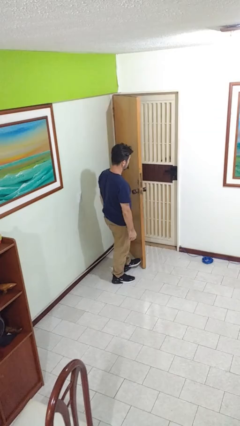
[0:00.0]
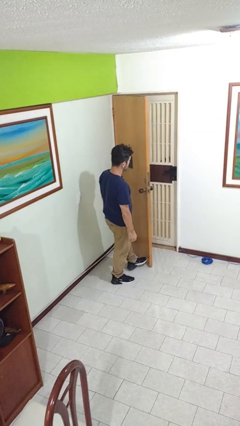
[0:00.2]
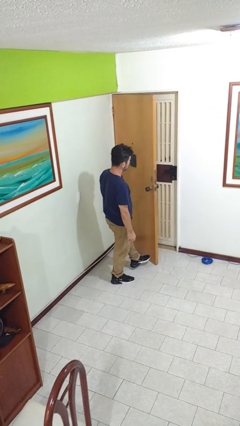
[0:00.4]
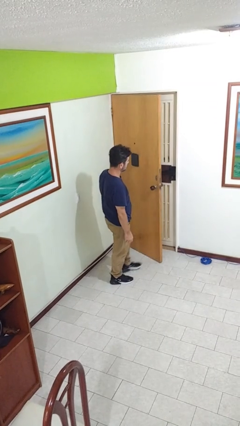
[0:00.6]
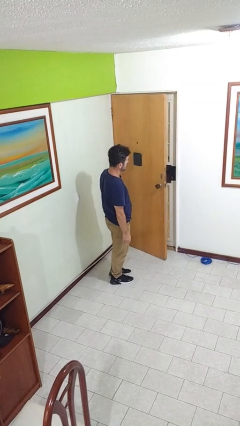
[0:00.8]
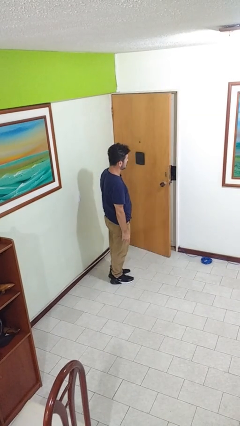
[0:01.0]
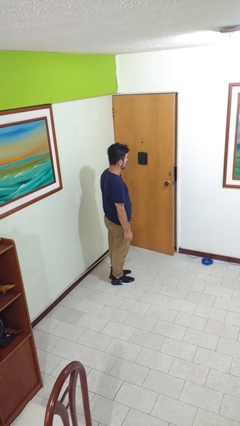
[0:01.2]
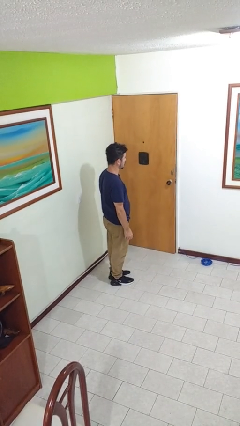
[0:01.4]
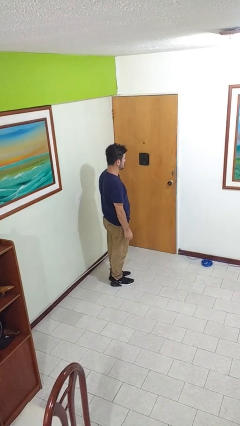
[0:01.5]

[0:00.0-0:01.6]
person closes door with foot

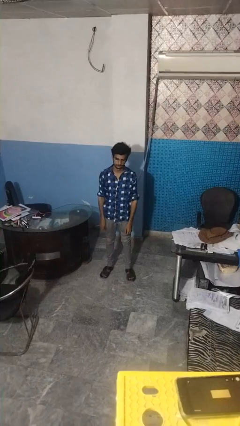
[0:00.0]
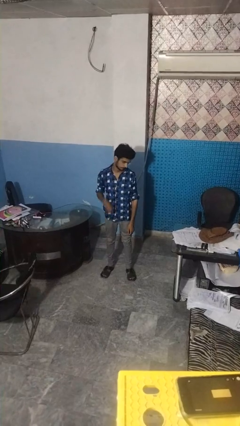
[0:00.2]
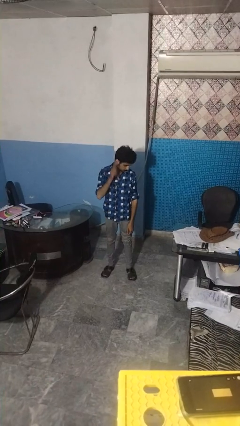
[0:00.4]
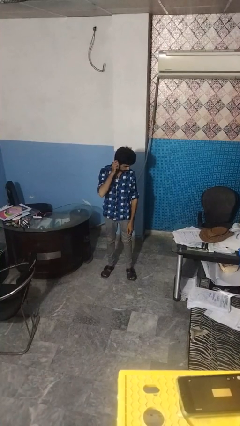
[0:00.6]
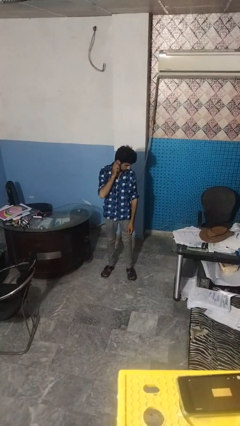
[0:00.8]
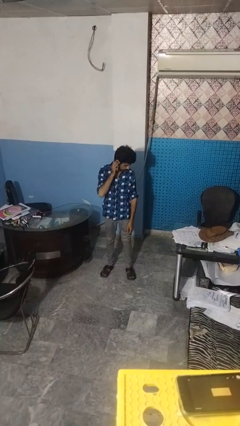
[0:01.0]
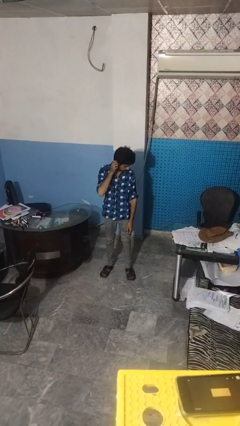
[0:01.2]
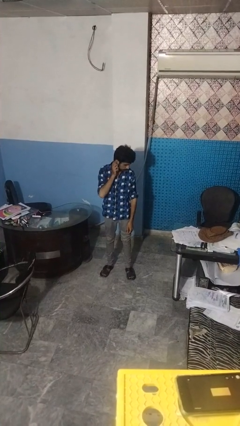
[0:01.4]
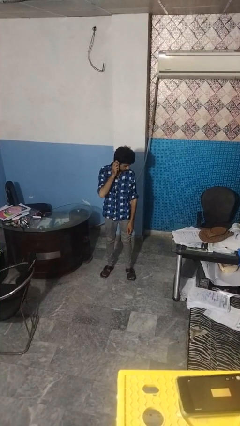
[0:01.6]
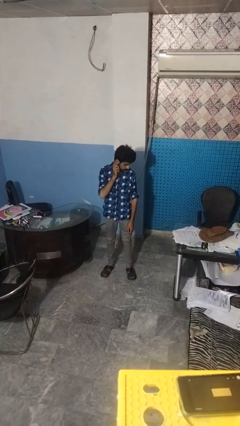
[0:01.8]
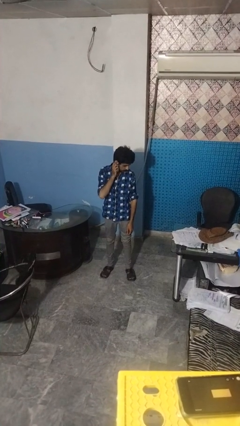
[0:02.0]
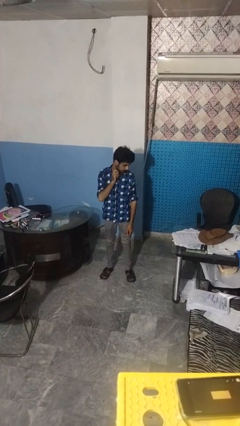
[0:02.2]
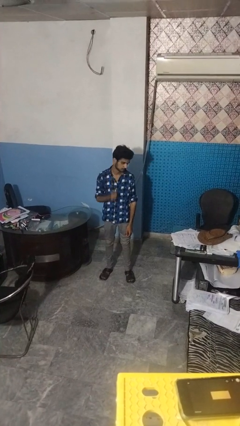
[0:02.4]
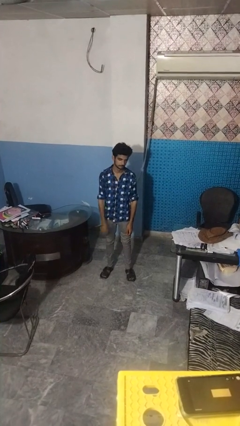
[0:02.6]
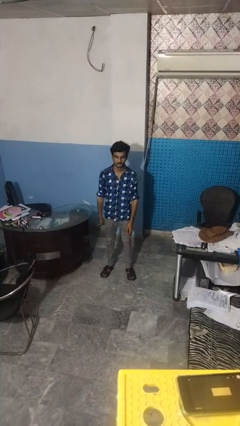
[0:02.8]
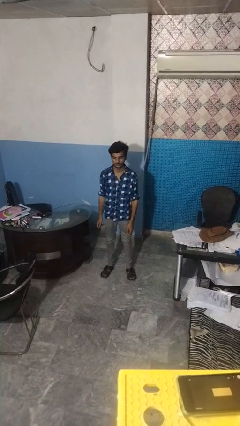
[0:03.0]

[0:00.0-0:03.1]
person touches earlobe

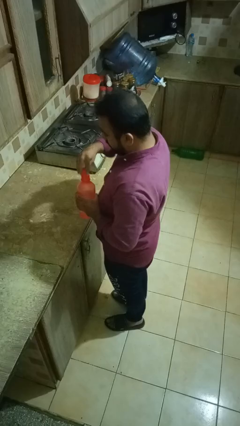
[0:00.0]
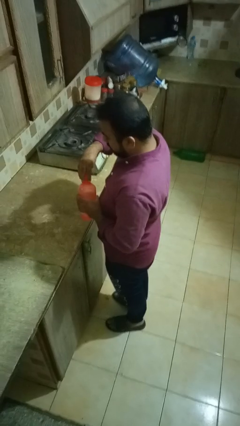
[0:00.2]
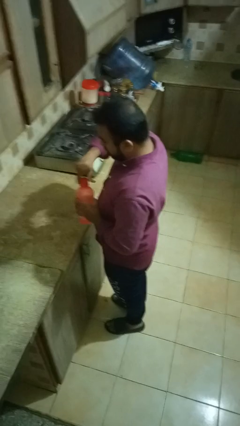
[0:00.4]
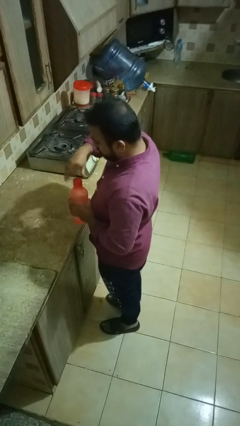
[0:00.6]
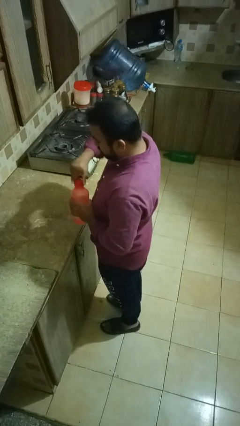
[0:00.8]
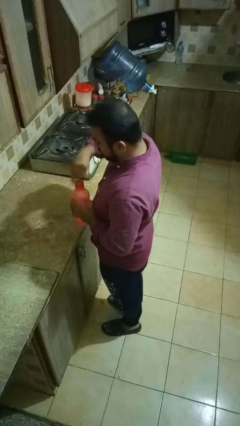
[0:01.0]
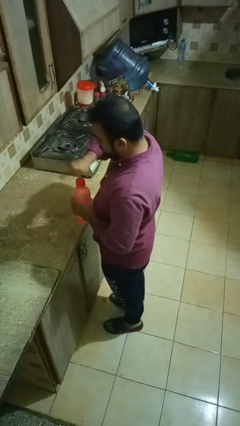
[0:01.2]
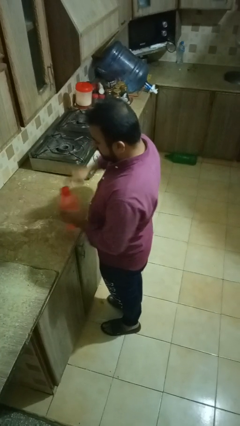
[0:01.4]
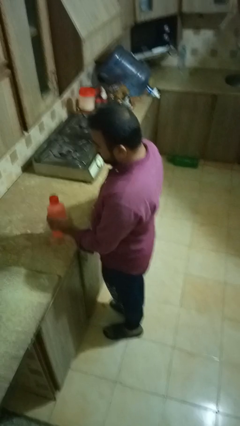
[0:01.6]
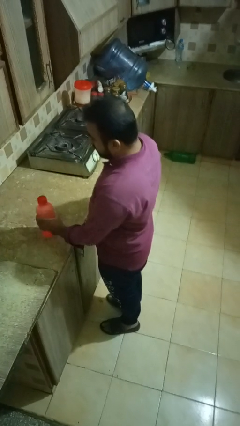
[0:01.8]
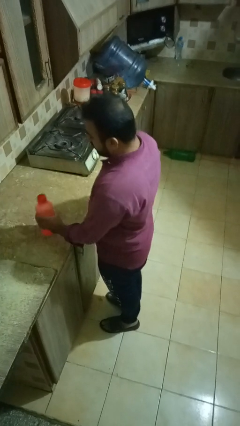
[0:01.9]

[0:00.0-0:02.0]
person screws lid to bottle

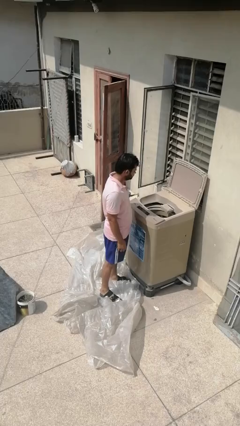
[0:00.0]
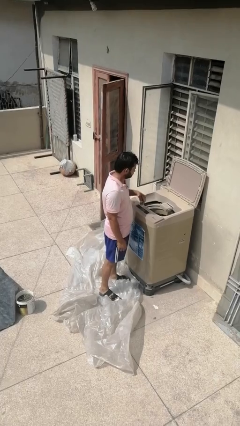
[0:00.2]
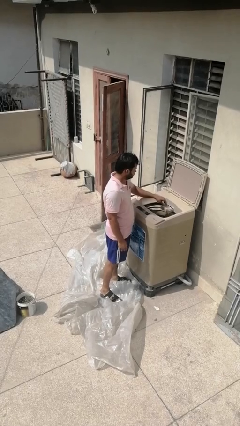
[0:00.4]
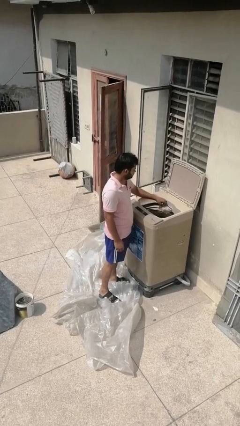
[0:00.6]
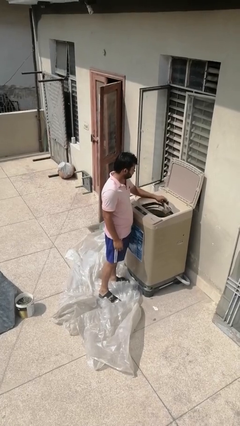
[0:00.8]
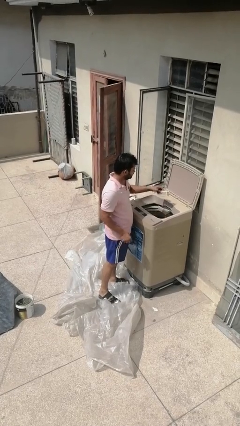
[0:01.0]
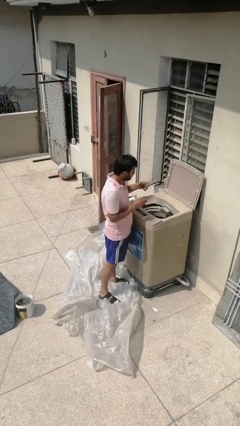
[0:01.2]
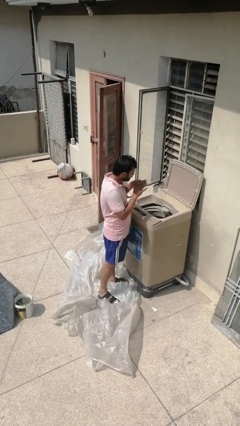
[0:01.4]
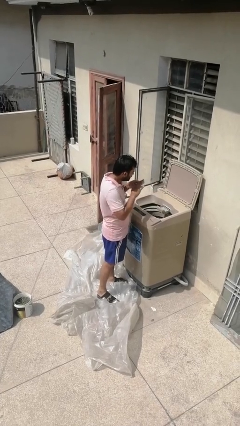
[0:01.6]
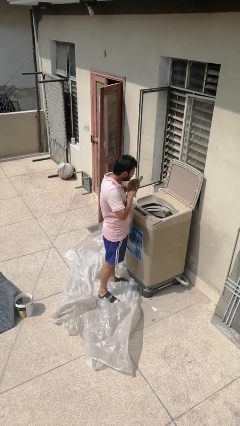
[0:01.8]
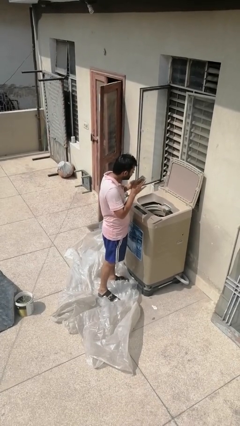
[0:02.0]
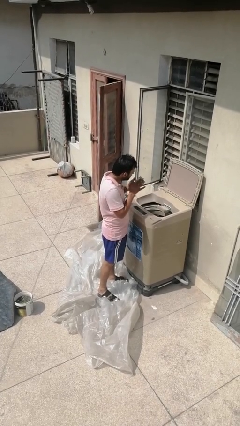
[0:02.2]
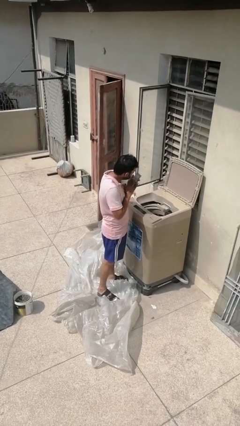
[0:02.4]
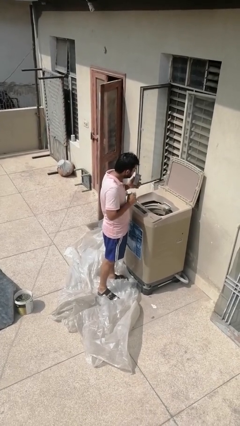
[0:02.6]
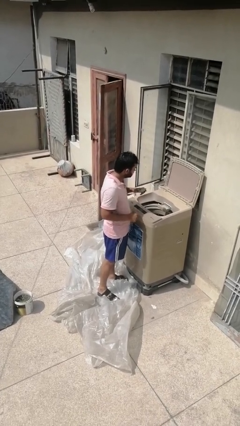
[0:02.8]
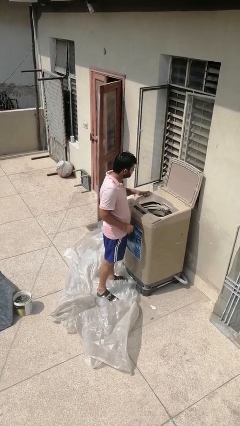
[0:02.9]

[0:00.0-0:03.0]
person cleans dryer lint trap

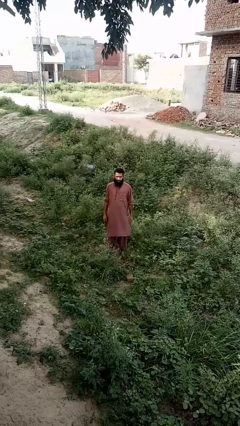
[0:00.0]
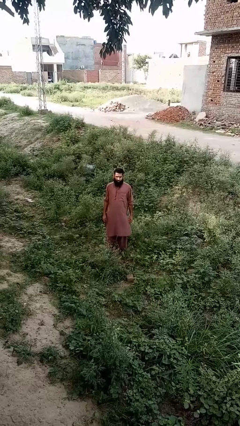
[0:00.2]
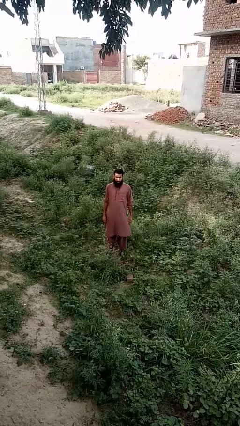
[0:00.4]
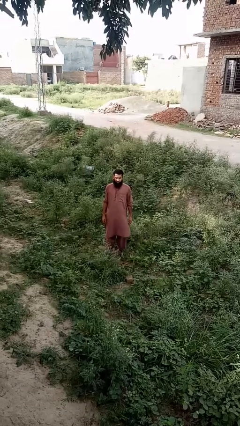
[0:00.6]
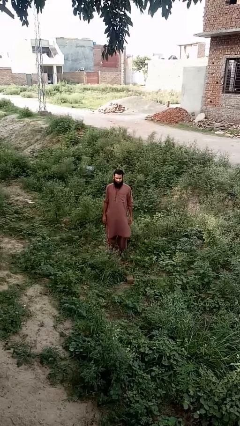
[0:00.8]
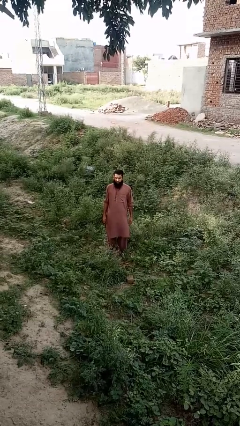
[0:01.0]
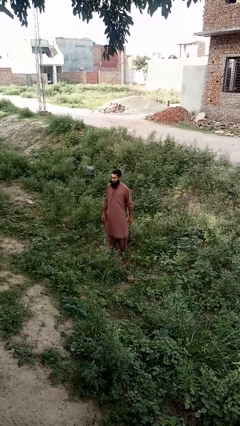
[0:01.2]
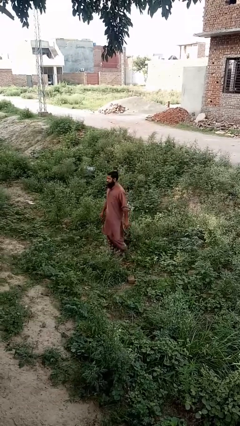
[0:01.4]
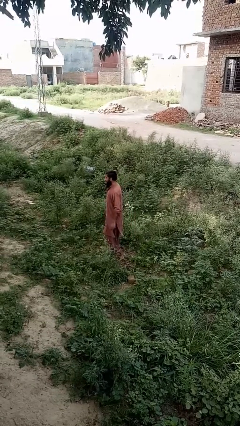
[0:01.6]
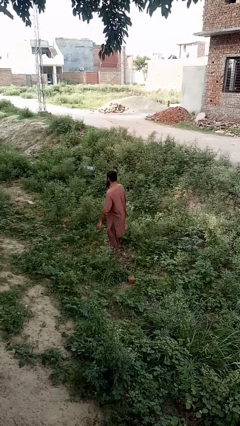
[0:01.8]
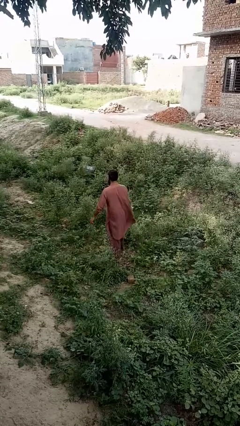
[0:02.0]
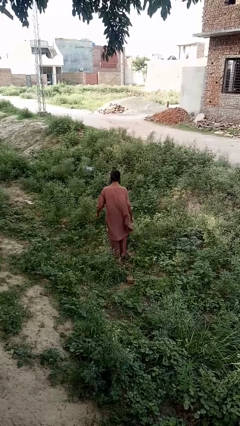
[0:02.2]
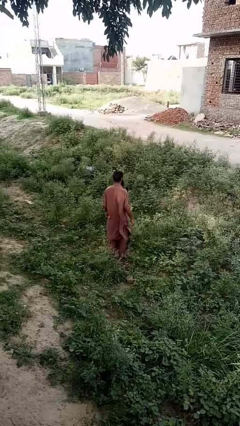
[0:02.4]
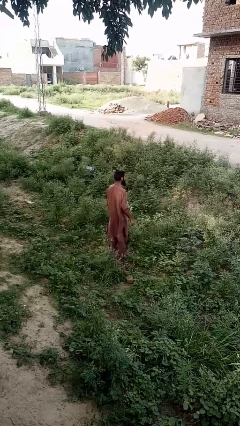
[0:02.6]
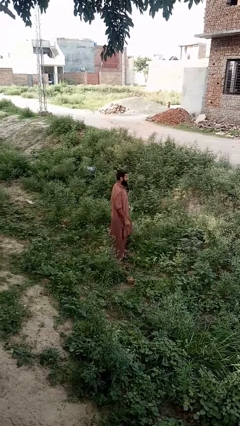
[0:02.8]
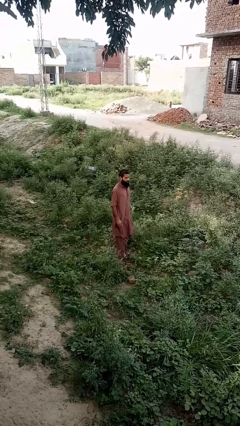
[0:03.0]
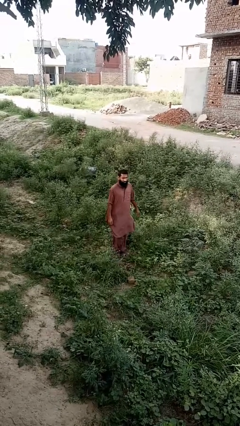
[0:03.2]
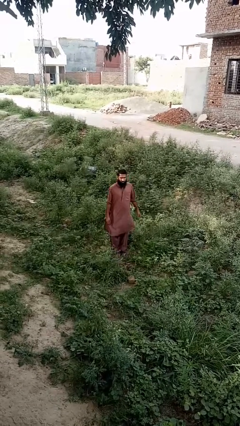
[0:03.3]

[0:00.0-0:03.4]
person twirls

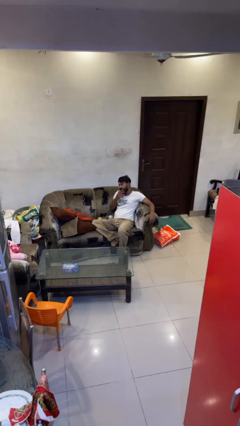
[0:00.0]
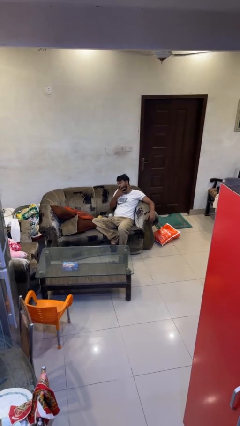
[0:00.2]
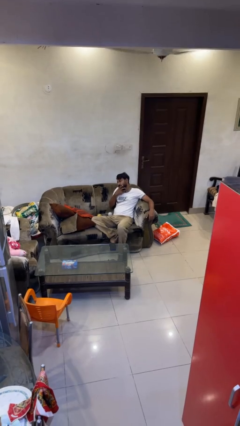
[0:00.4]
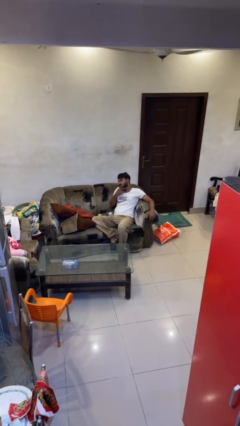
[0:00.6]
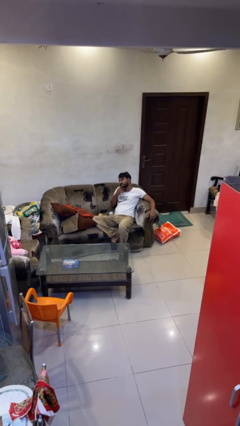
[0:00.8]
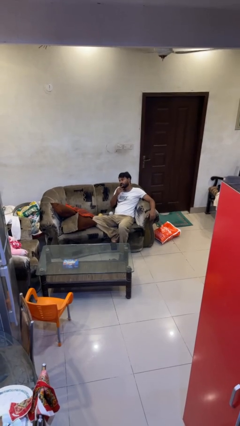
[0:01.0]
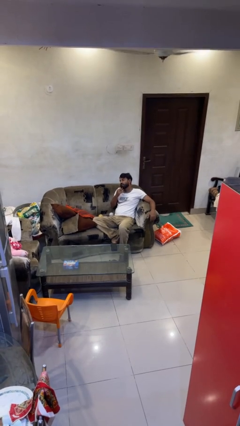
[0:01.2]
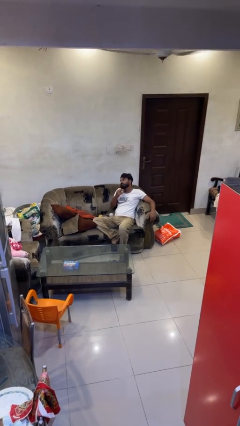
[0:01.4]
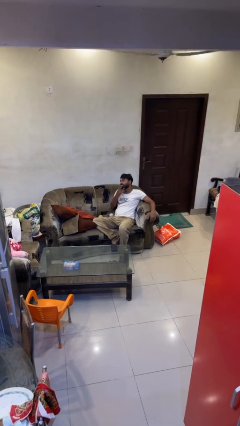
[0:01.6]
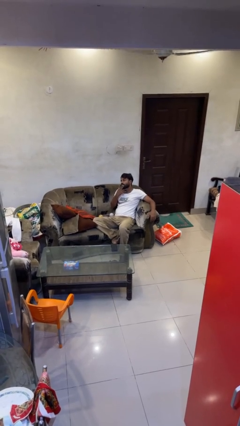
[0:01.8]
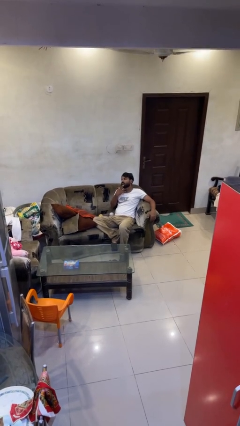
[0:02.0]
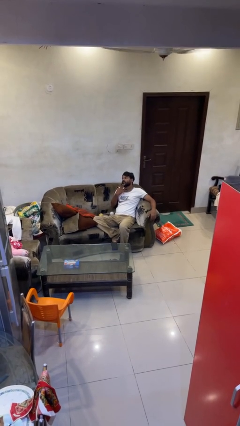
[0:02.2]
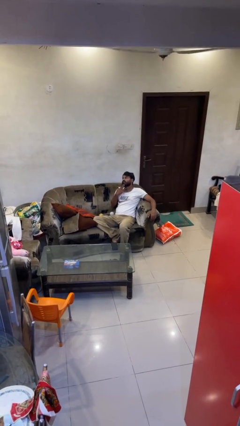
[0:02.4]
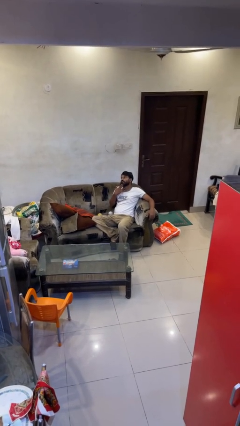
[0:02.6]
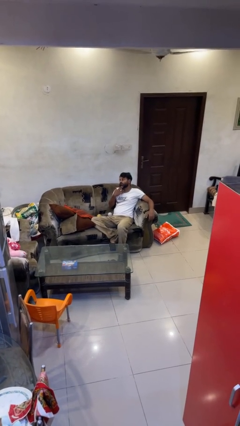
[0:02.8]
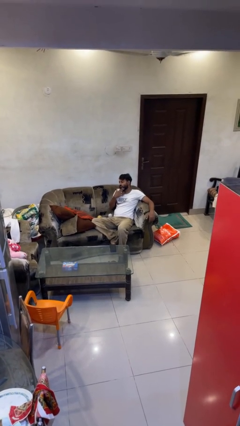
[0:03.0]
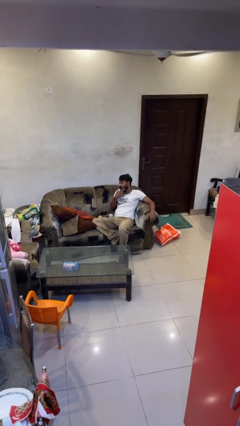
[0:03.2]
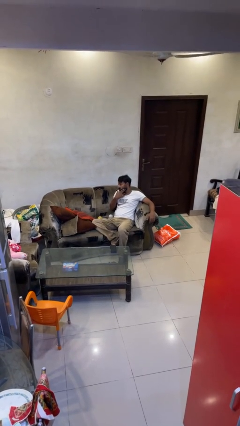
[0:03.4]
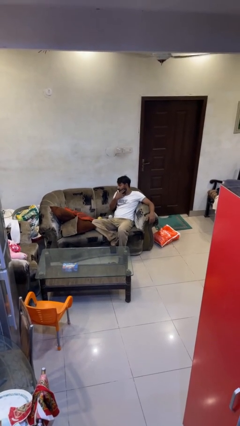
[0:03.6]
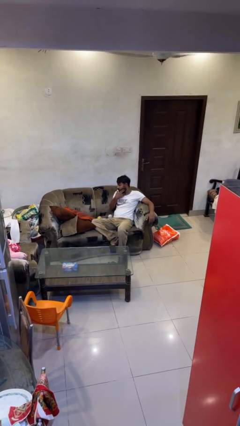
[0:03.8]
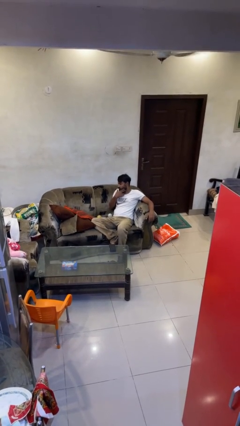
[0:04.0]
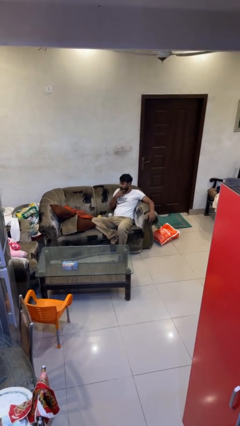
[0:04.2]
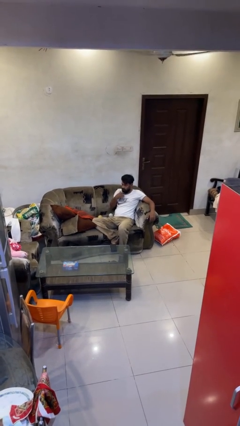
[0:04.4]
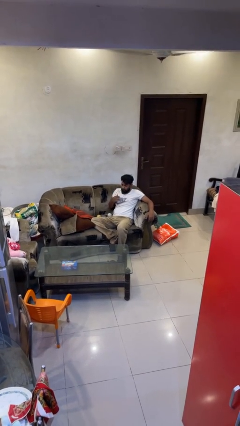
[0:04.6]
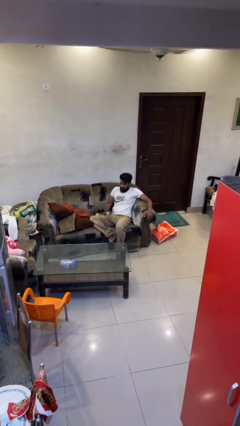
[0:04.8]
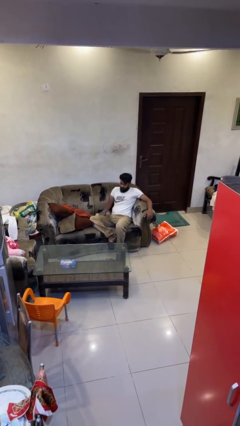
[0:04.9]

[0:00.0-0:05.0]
person strokes chin
